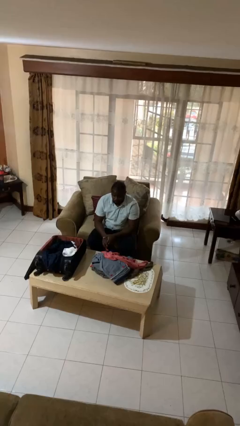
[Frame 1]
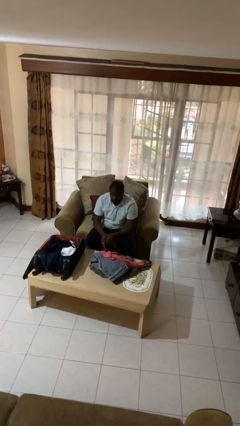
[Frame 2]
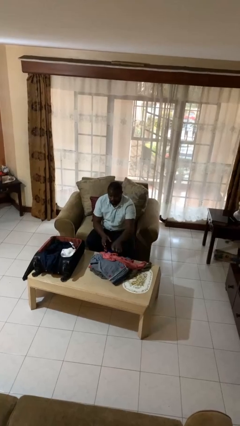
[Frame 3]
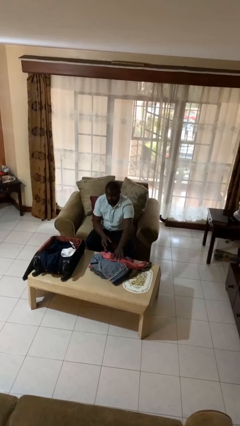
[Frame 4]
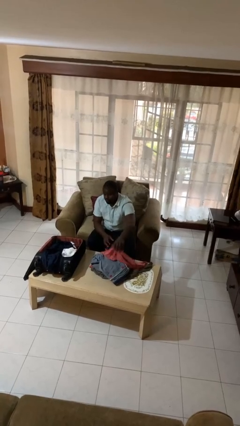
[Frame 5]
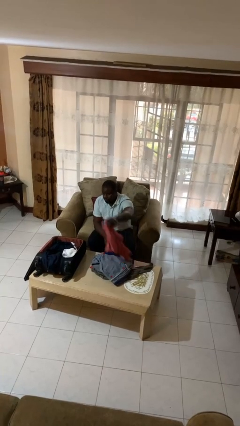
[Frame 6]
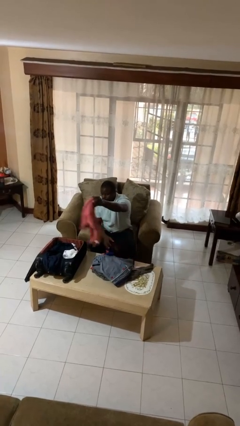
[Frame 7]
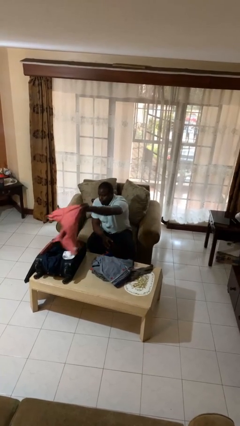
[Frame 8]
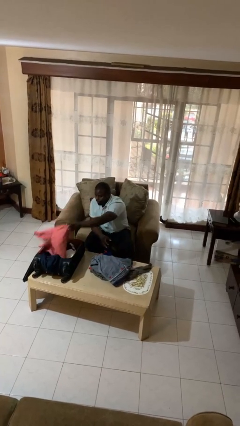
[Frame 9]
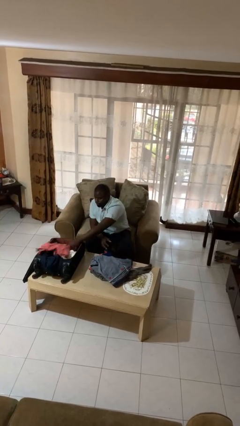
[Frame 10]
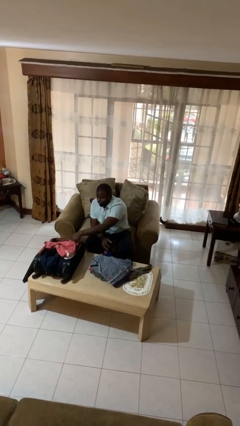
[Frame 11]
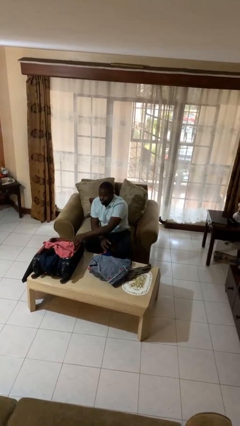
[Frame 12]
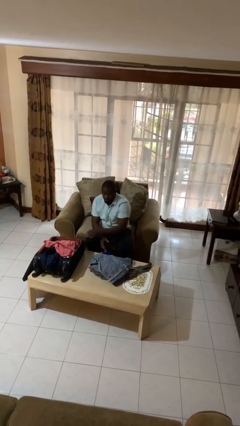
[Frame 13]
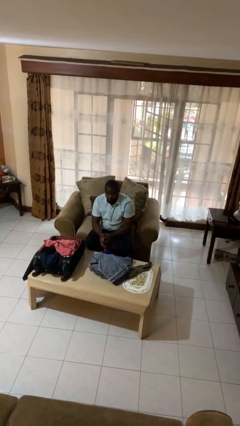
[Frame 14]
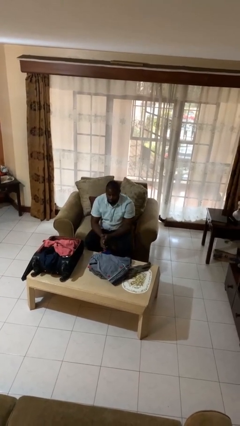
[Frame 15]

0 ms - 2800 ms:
person loads clothes into suitcase

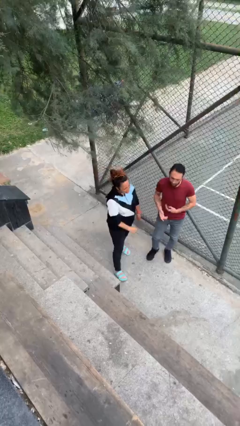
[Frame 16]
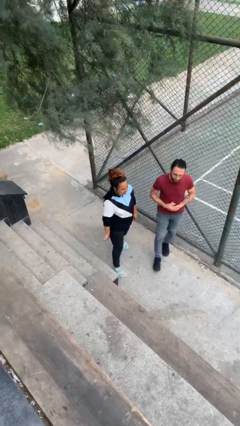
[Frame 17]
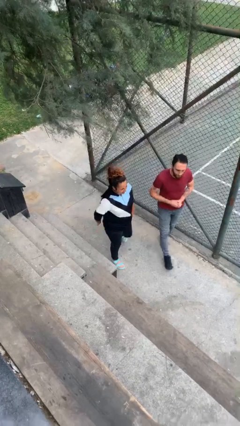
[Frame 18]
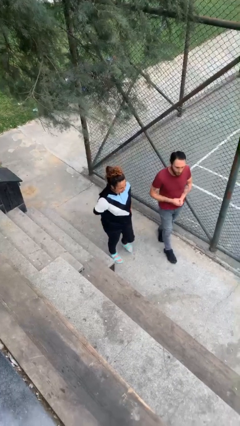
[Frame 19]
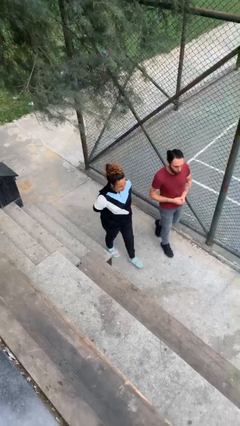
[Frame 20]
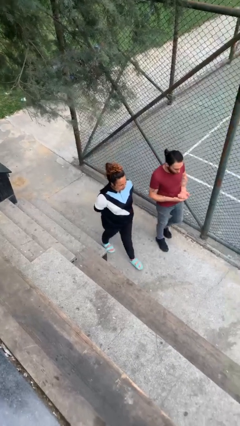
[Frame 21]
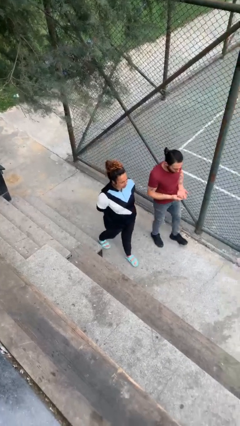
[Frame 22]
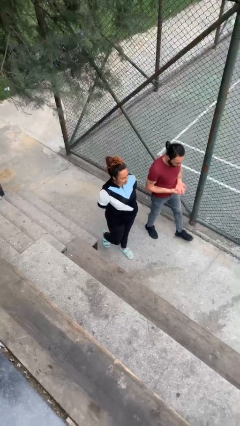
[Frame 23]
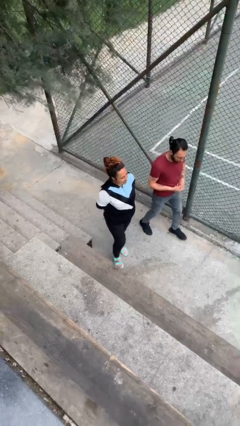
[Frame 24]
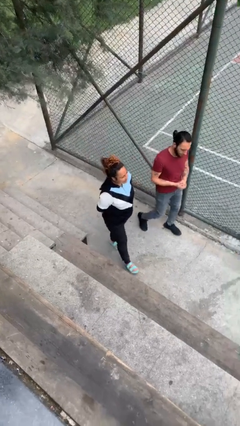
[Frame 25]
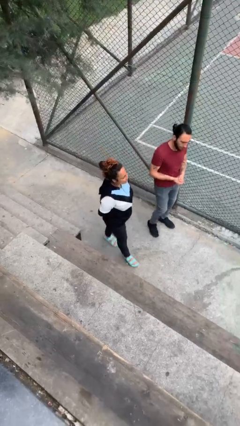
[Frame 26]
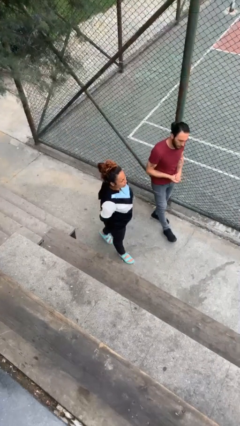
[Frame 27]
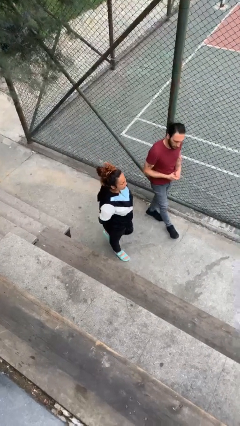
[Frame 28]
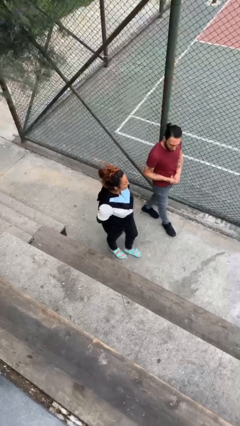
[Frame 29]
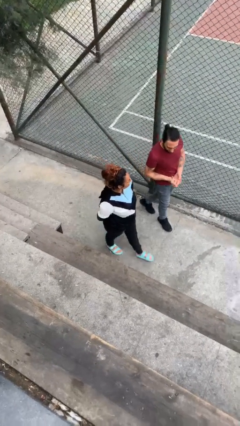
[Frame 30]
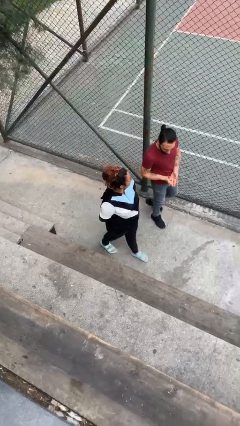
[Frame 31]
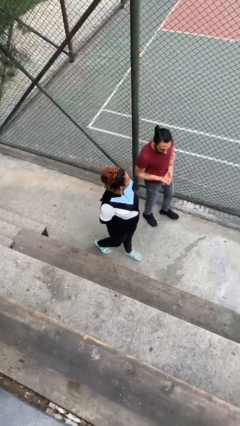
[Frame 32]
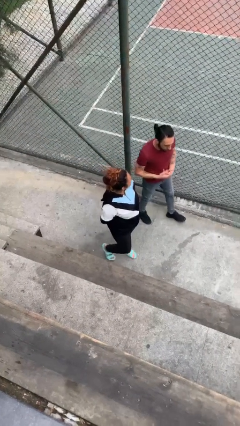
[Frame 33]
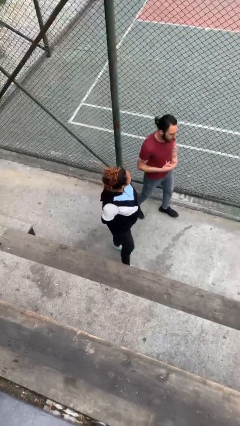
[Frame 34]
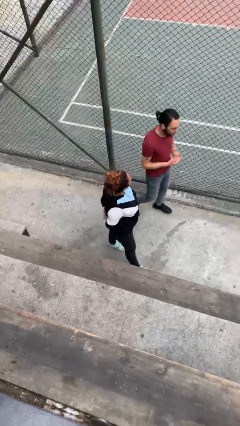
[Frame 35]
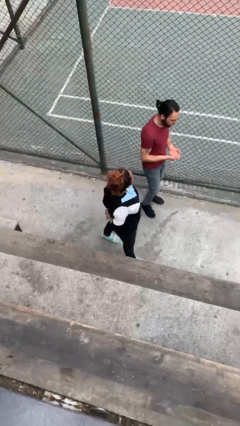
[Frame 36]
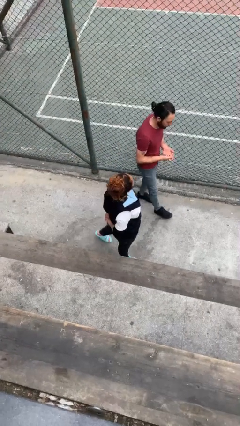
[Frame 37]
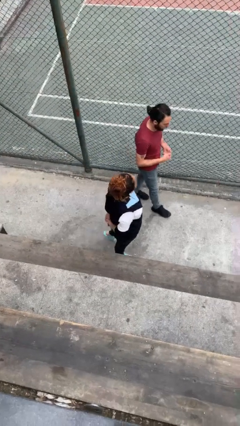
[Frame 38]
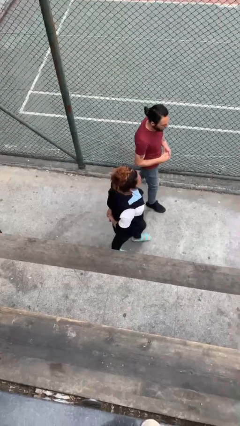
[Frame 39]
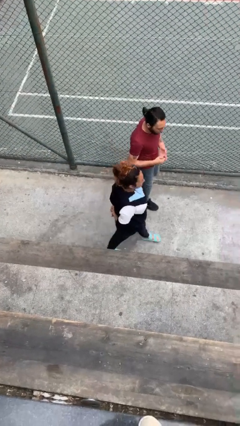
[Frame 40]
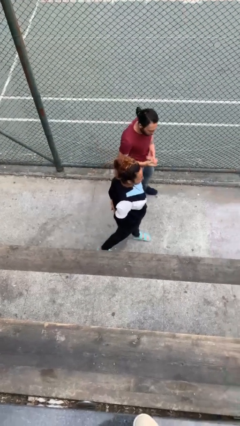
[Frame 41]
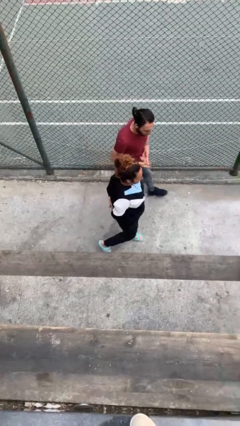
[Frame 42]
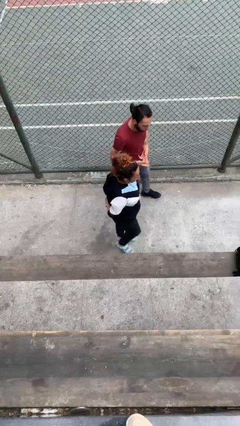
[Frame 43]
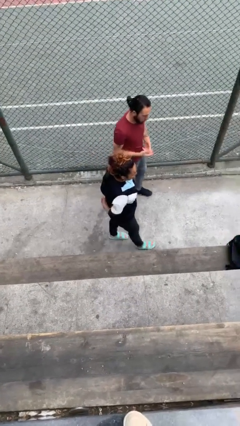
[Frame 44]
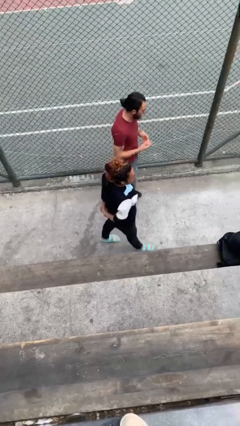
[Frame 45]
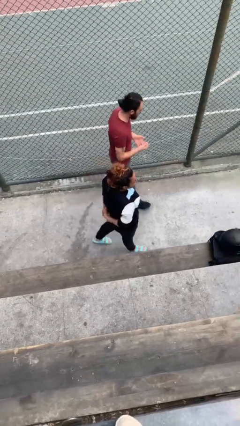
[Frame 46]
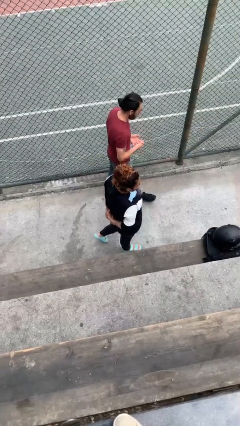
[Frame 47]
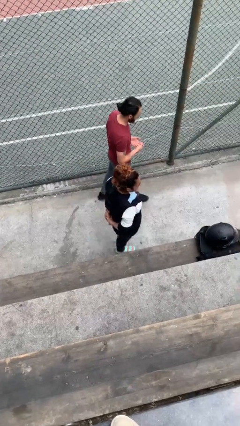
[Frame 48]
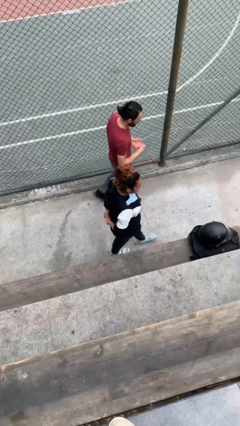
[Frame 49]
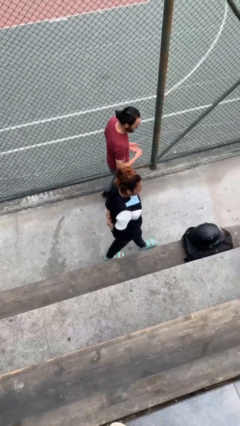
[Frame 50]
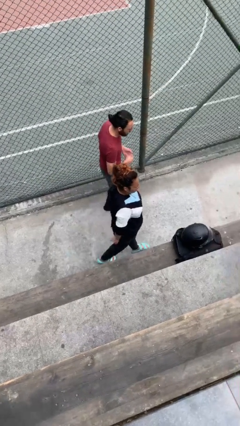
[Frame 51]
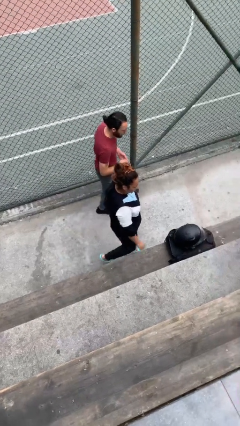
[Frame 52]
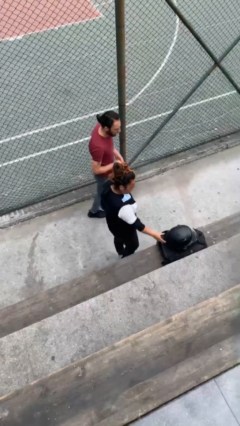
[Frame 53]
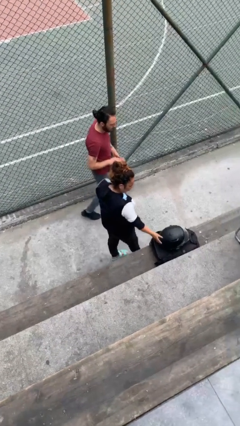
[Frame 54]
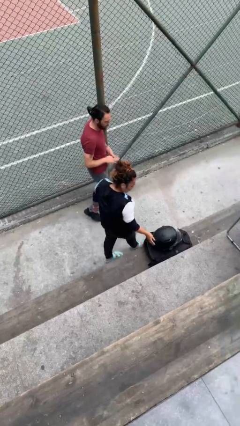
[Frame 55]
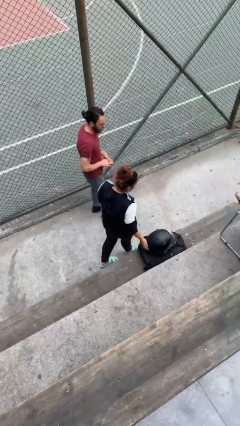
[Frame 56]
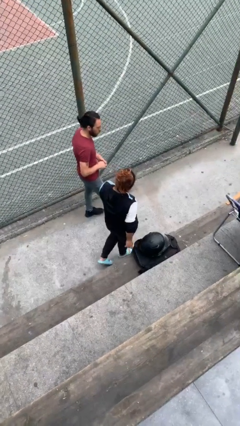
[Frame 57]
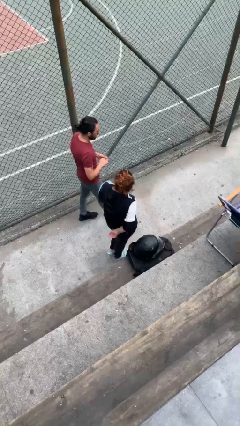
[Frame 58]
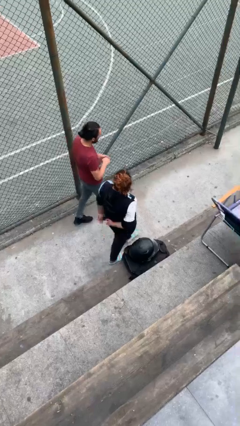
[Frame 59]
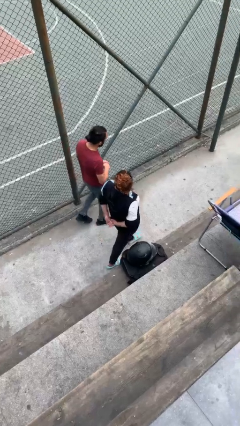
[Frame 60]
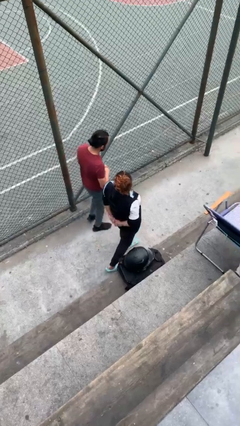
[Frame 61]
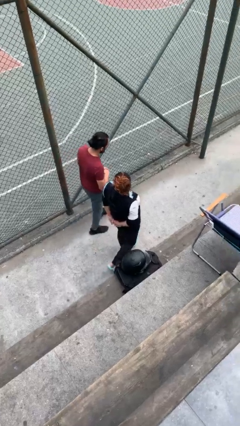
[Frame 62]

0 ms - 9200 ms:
person talks to person

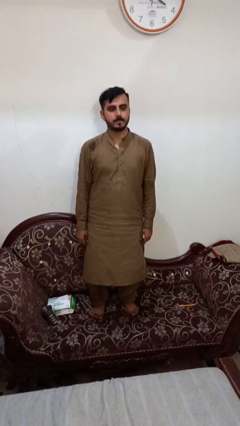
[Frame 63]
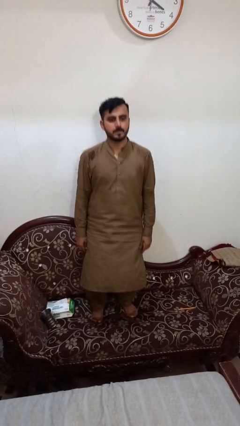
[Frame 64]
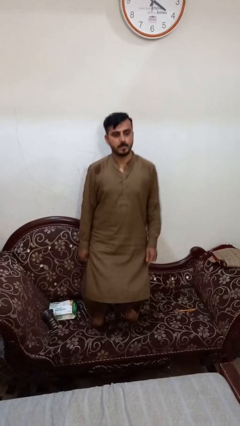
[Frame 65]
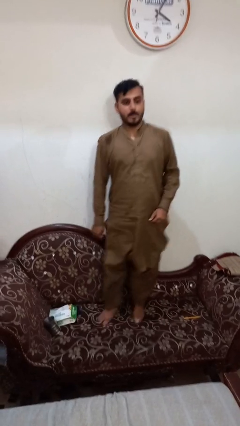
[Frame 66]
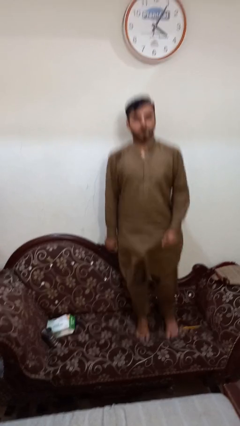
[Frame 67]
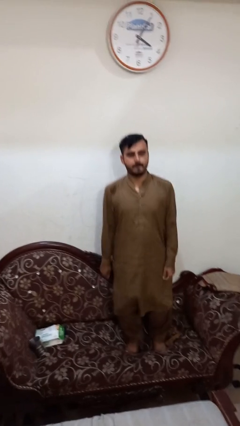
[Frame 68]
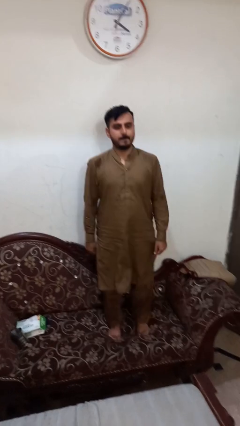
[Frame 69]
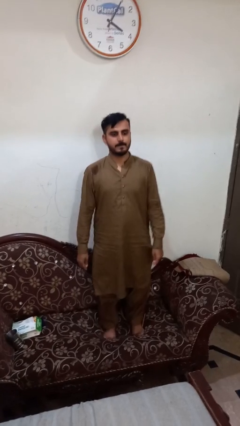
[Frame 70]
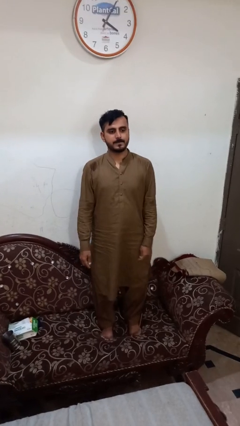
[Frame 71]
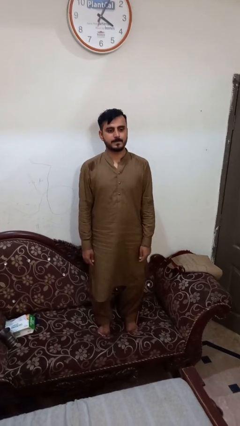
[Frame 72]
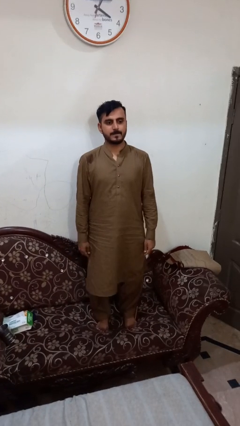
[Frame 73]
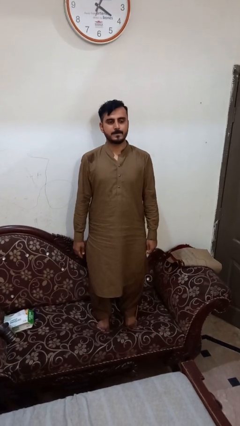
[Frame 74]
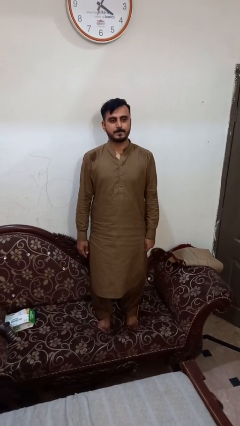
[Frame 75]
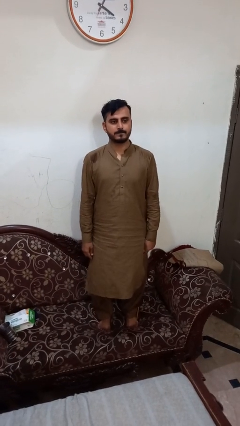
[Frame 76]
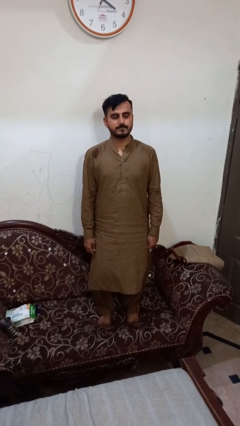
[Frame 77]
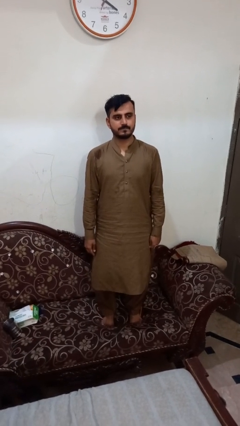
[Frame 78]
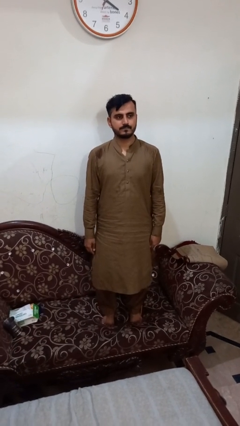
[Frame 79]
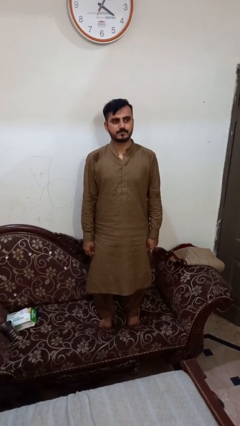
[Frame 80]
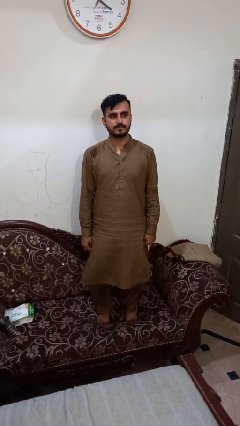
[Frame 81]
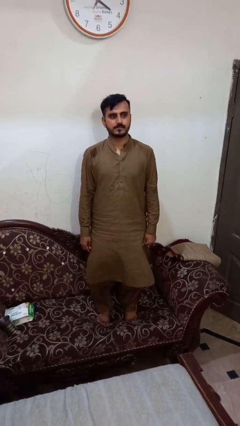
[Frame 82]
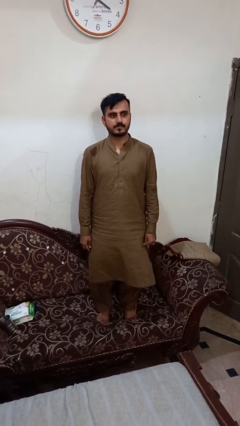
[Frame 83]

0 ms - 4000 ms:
person jumps on couch

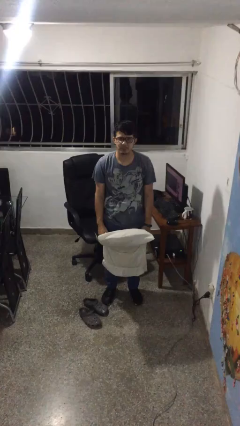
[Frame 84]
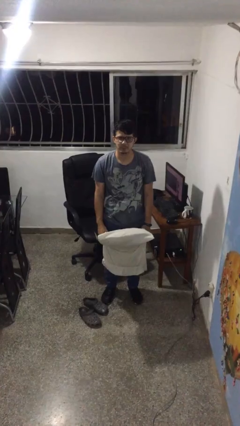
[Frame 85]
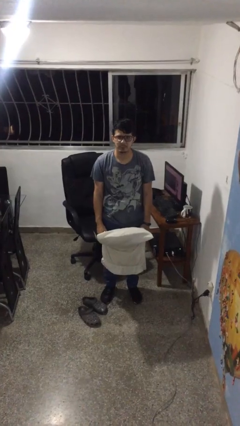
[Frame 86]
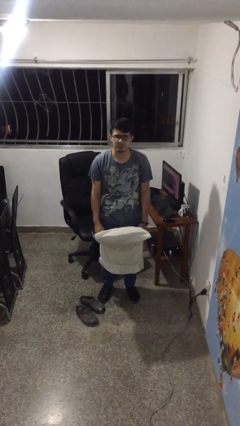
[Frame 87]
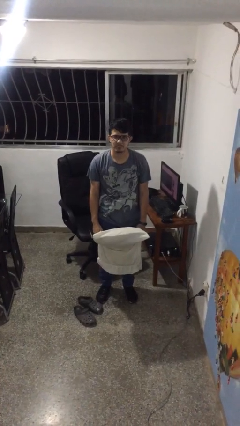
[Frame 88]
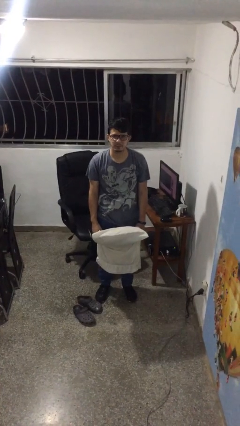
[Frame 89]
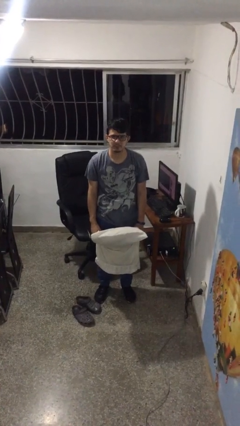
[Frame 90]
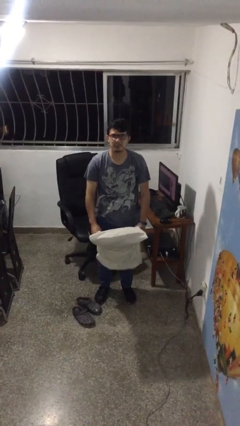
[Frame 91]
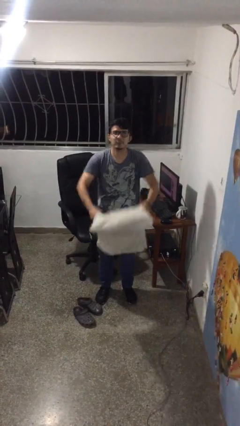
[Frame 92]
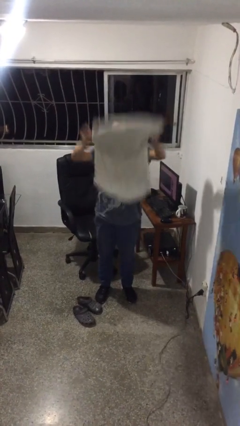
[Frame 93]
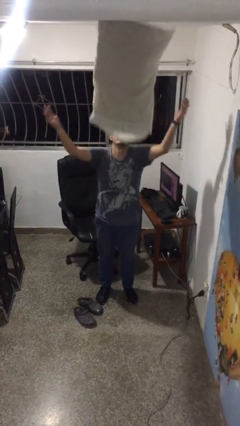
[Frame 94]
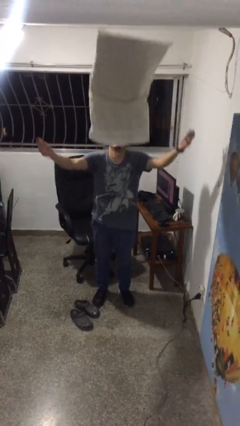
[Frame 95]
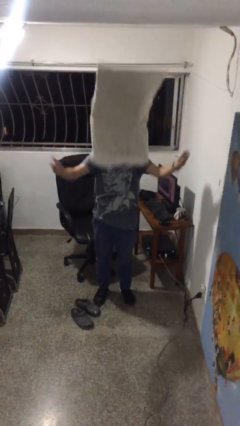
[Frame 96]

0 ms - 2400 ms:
person drops object
